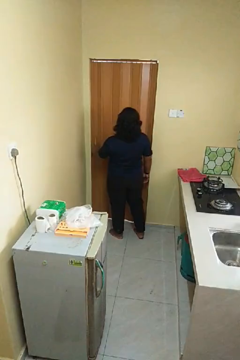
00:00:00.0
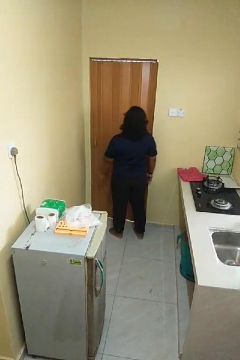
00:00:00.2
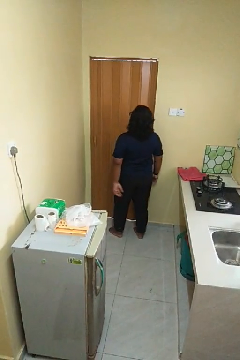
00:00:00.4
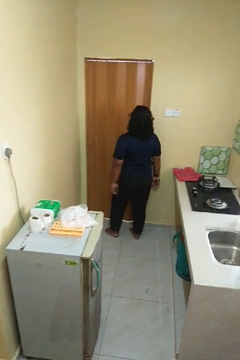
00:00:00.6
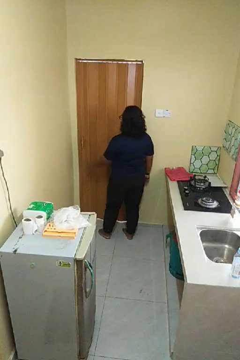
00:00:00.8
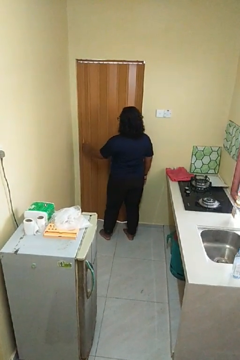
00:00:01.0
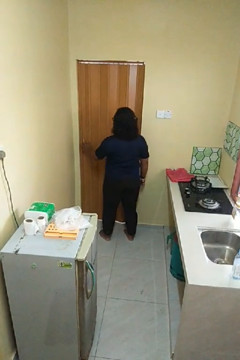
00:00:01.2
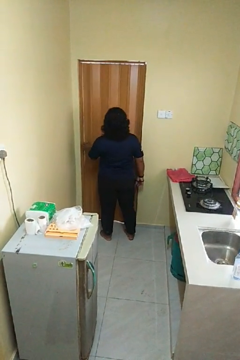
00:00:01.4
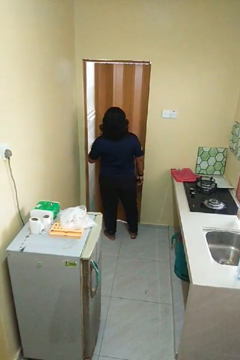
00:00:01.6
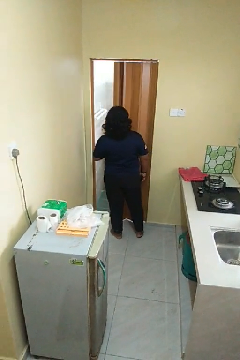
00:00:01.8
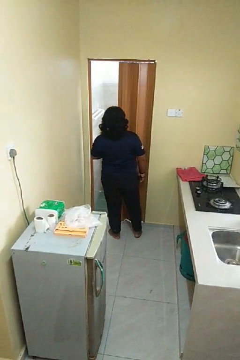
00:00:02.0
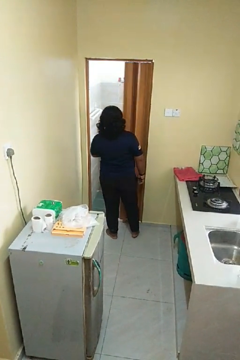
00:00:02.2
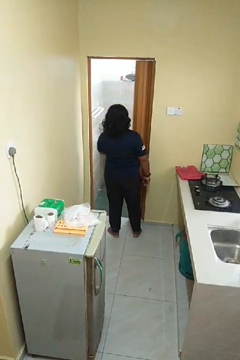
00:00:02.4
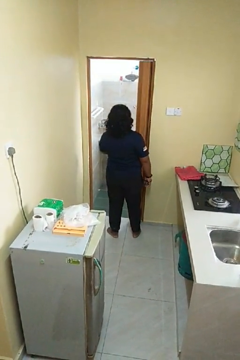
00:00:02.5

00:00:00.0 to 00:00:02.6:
person opens sliding door

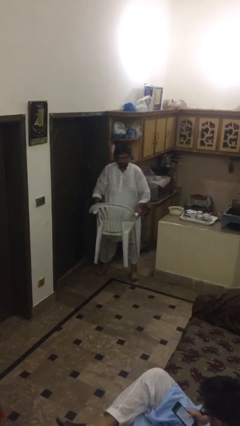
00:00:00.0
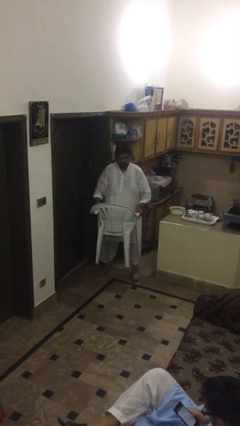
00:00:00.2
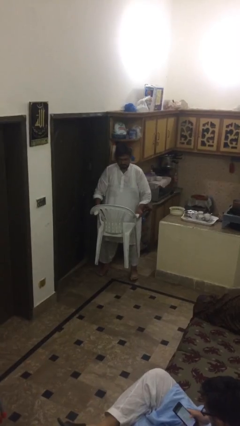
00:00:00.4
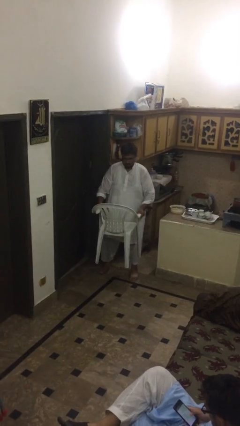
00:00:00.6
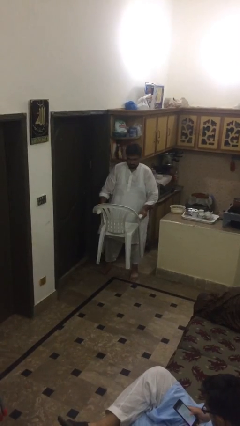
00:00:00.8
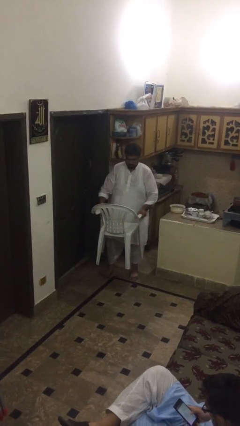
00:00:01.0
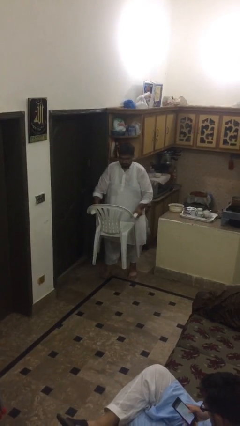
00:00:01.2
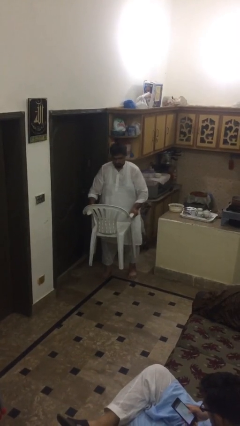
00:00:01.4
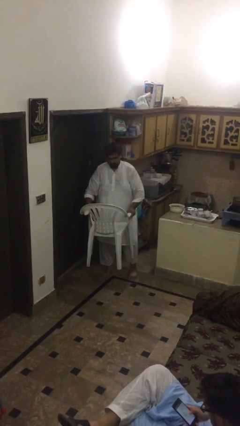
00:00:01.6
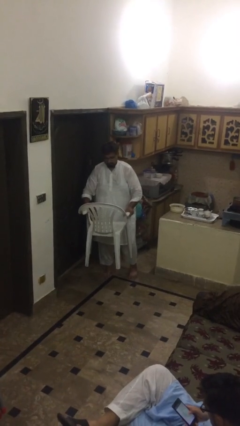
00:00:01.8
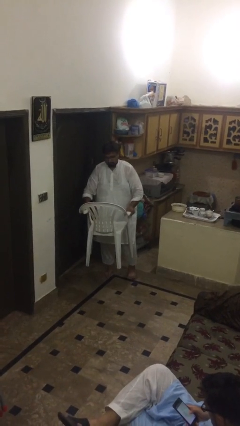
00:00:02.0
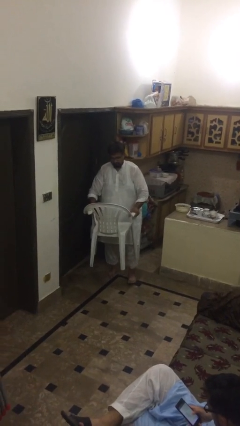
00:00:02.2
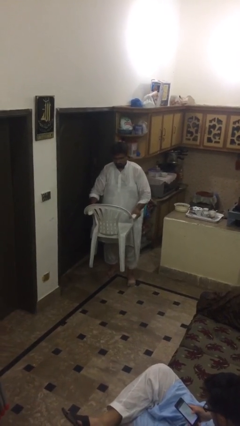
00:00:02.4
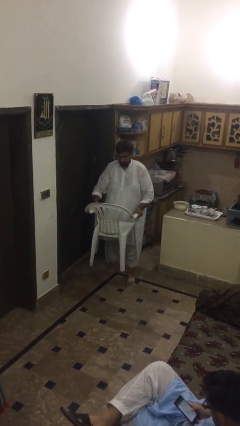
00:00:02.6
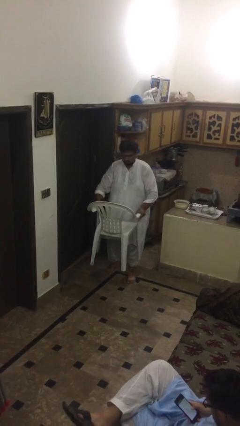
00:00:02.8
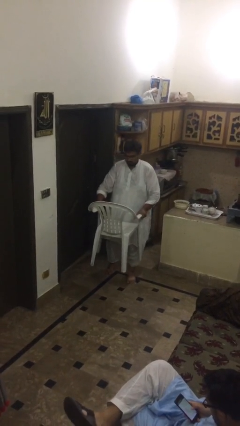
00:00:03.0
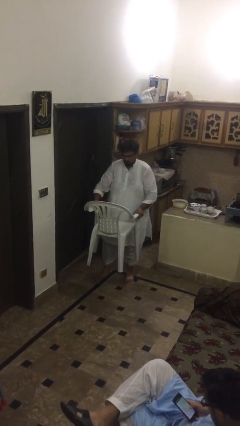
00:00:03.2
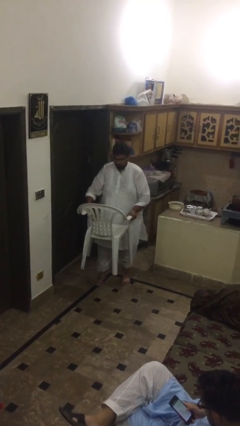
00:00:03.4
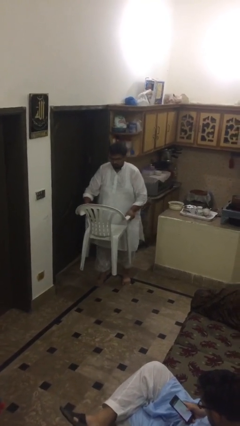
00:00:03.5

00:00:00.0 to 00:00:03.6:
person carries heavy object

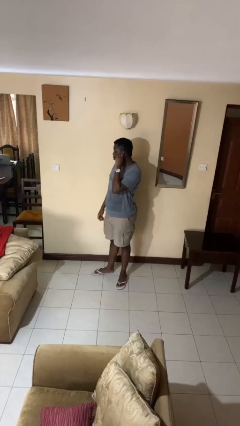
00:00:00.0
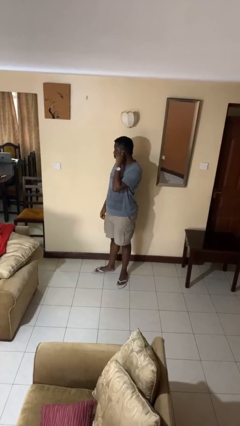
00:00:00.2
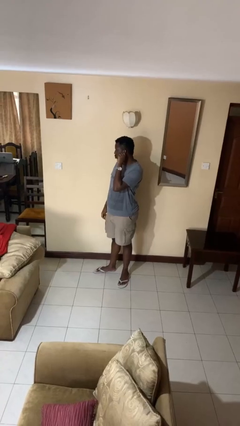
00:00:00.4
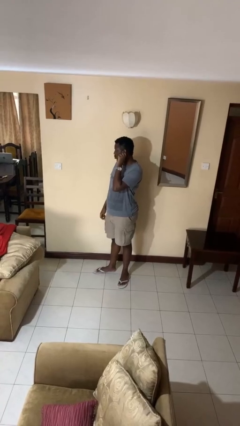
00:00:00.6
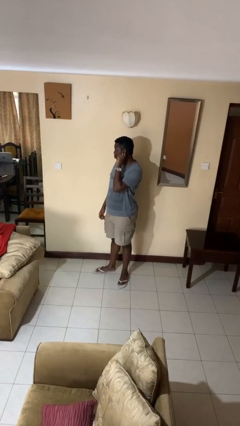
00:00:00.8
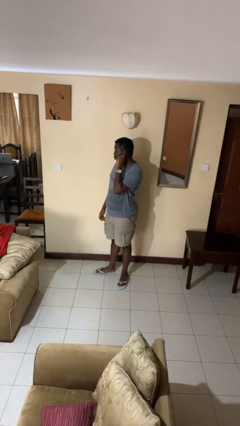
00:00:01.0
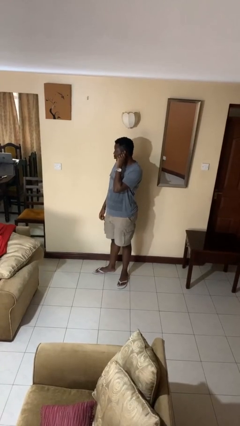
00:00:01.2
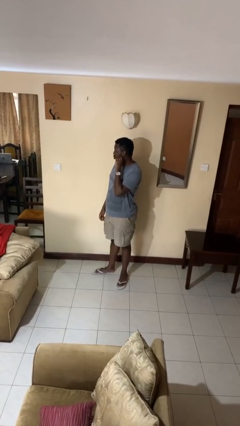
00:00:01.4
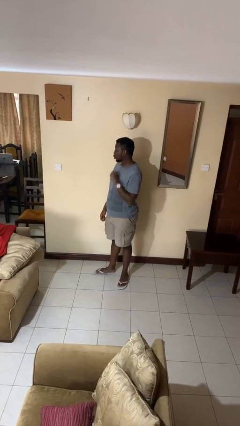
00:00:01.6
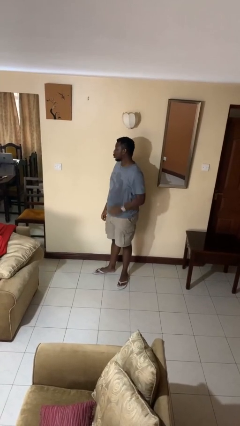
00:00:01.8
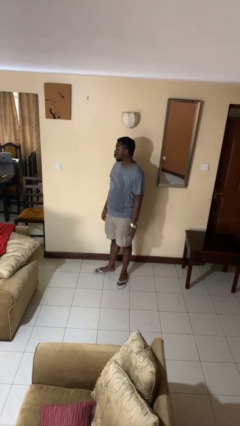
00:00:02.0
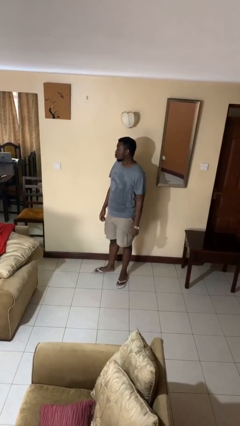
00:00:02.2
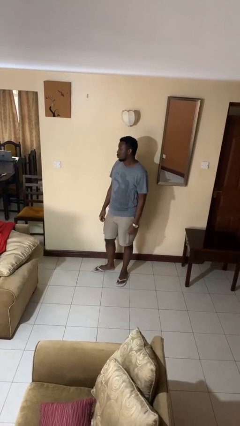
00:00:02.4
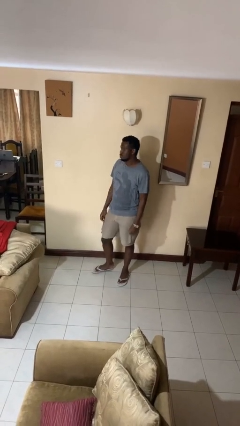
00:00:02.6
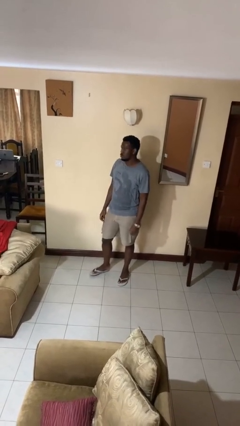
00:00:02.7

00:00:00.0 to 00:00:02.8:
person touches earlobe

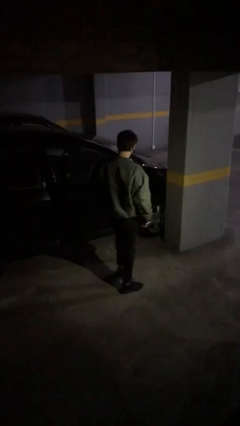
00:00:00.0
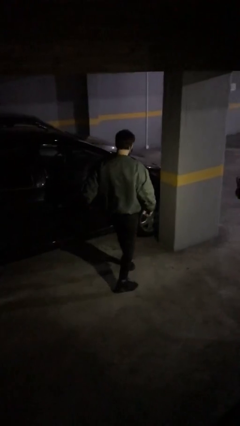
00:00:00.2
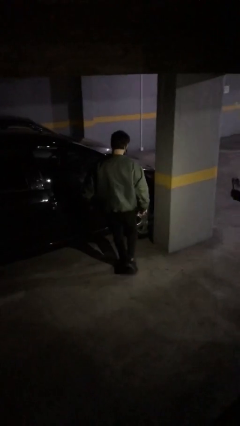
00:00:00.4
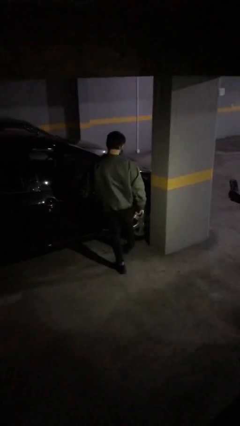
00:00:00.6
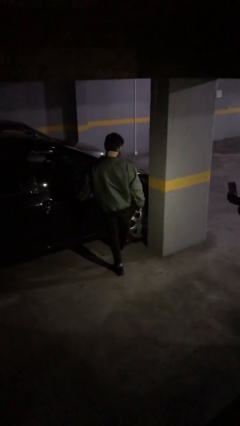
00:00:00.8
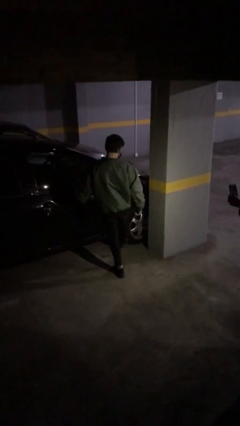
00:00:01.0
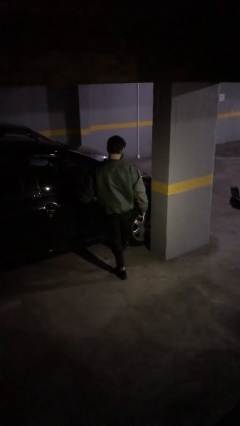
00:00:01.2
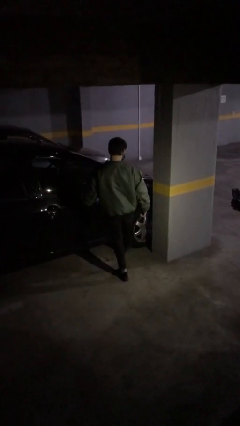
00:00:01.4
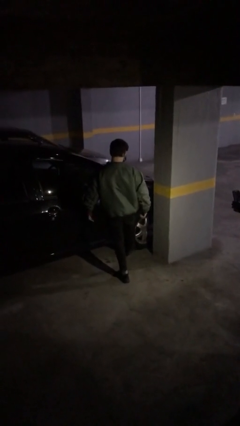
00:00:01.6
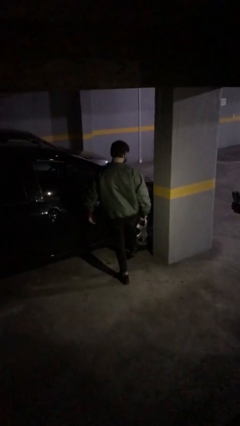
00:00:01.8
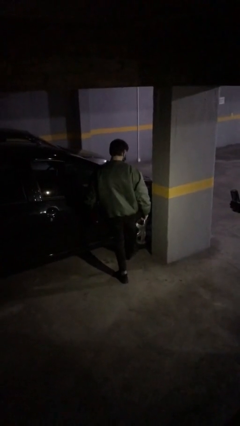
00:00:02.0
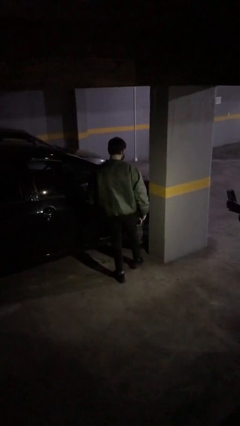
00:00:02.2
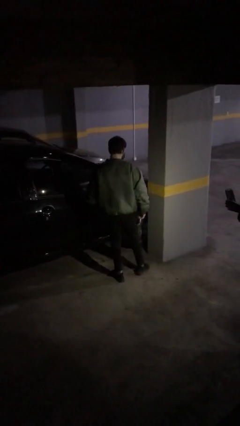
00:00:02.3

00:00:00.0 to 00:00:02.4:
person kicks car tires

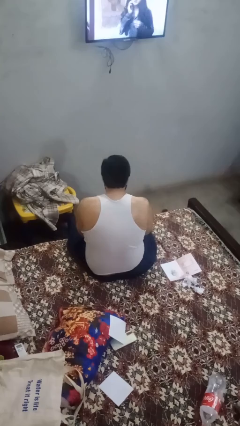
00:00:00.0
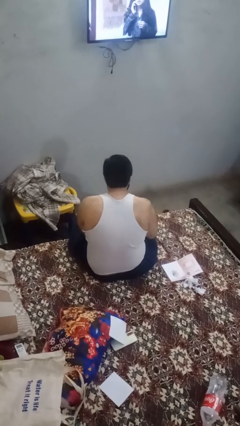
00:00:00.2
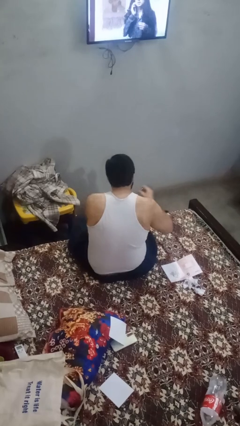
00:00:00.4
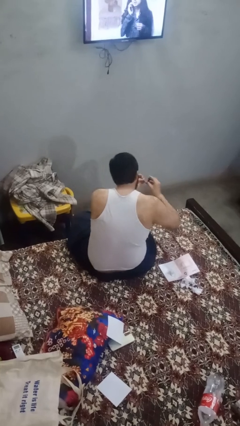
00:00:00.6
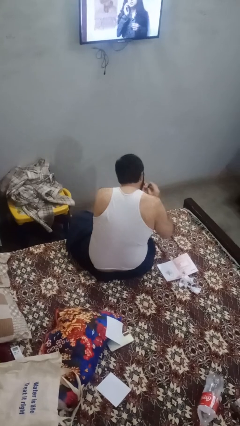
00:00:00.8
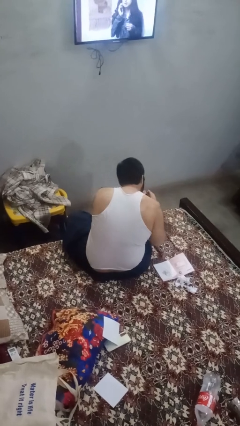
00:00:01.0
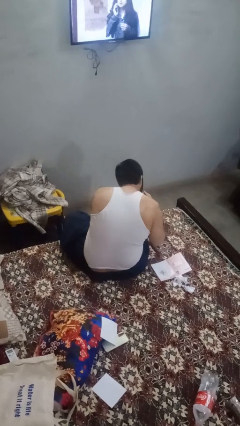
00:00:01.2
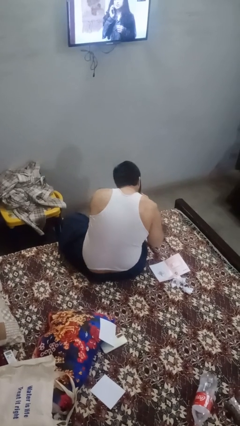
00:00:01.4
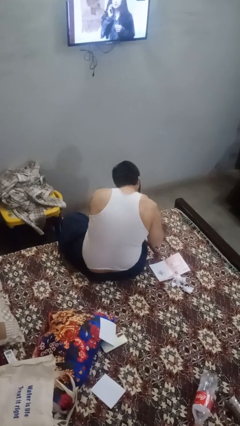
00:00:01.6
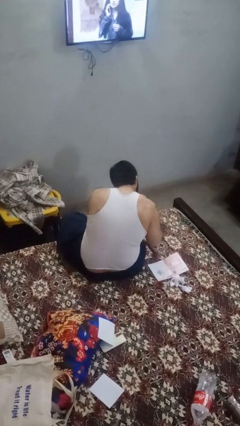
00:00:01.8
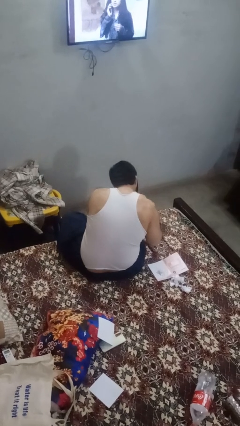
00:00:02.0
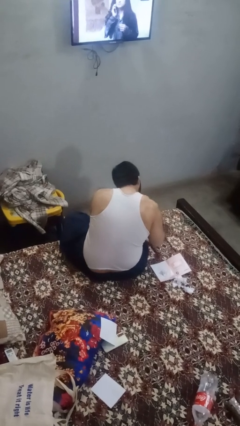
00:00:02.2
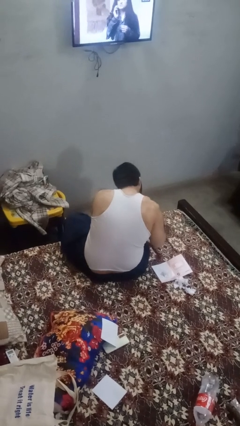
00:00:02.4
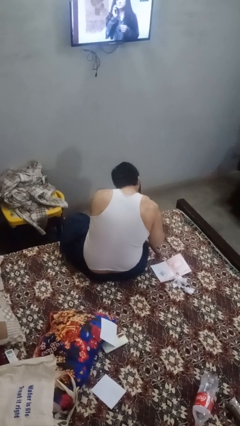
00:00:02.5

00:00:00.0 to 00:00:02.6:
person clips fingernails

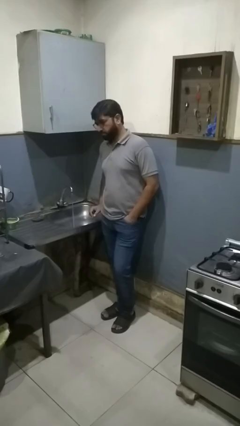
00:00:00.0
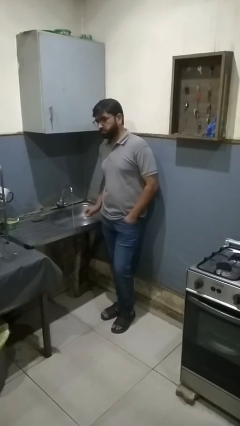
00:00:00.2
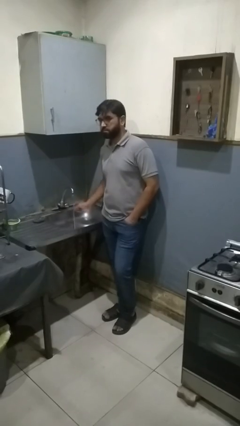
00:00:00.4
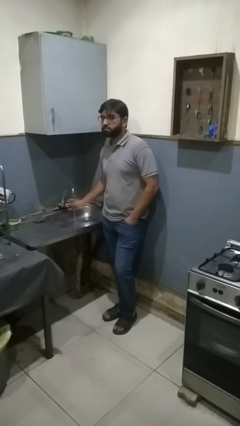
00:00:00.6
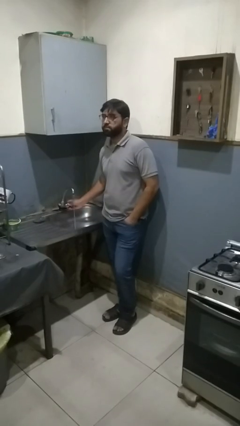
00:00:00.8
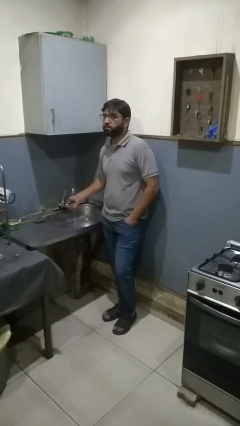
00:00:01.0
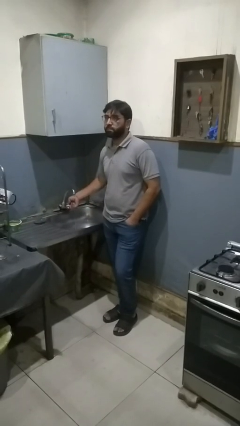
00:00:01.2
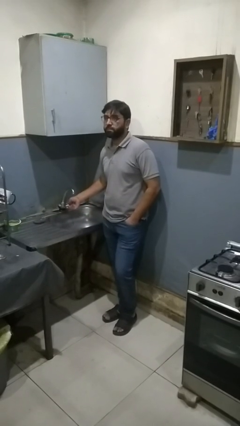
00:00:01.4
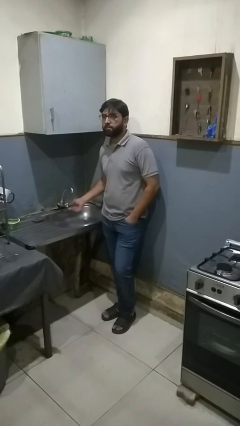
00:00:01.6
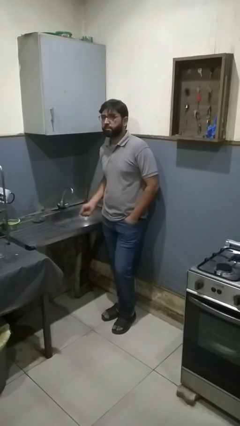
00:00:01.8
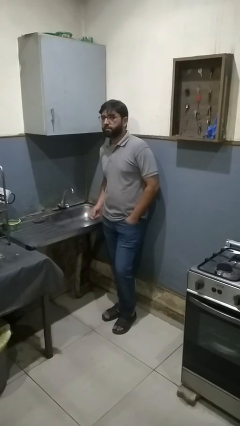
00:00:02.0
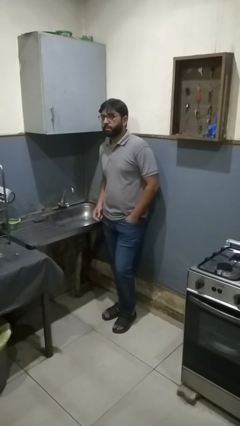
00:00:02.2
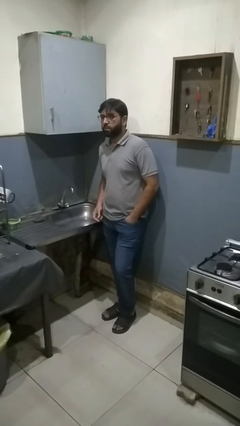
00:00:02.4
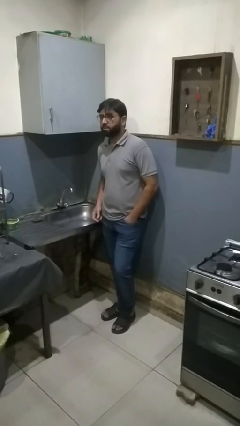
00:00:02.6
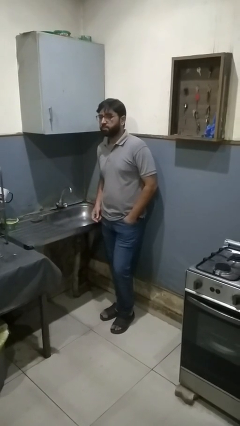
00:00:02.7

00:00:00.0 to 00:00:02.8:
person turns off faucet

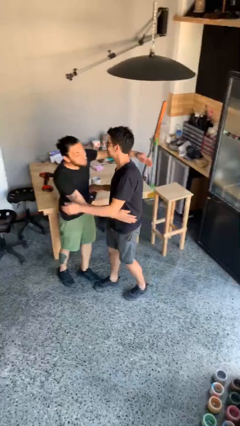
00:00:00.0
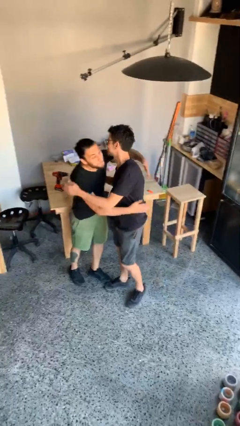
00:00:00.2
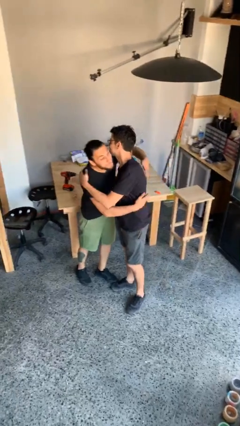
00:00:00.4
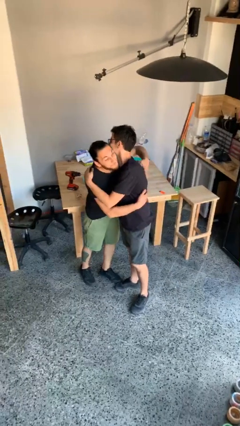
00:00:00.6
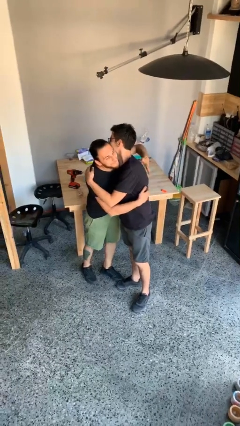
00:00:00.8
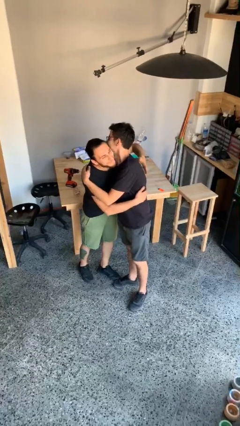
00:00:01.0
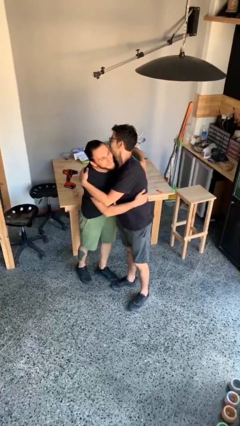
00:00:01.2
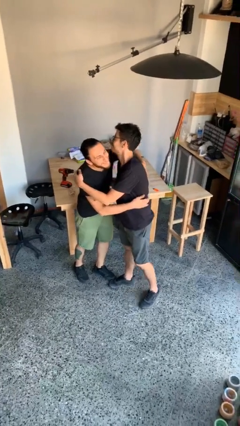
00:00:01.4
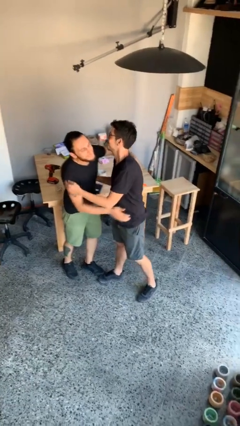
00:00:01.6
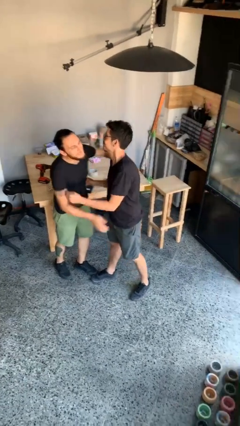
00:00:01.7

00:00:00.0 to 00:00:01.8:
person embraces person
